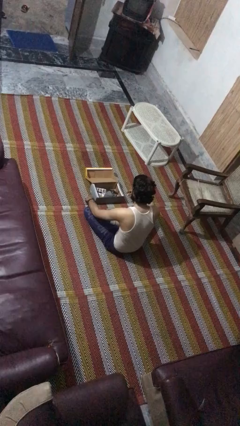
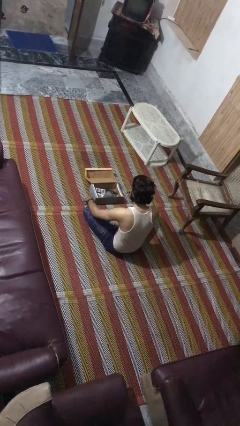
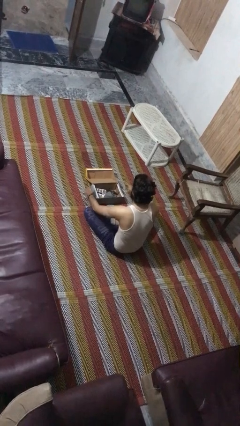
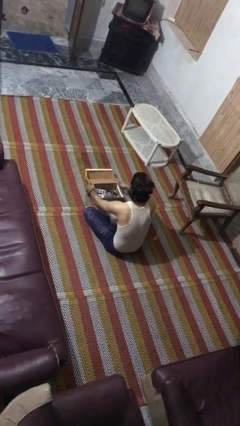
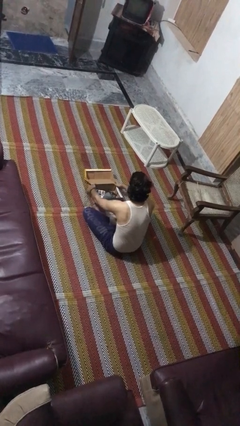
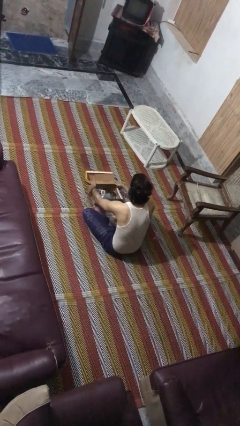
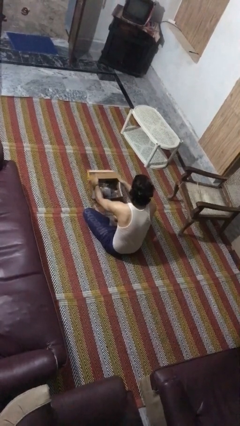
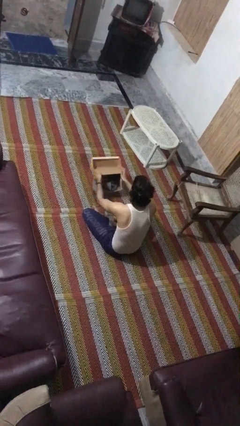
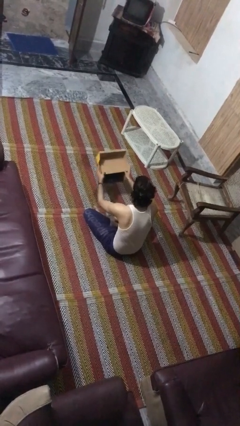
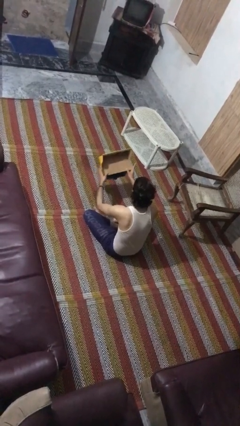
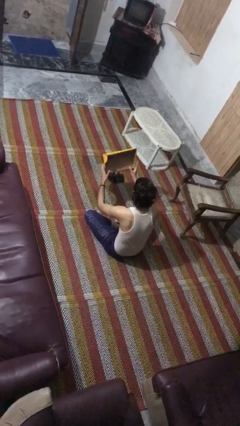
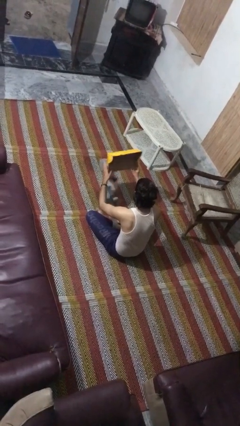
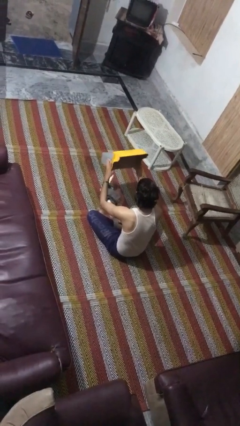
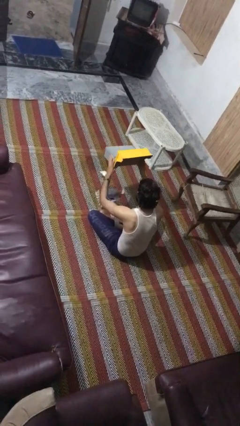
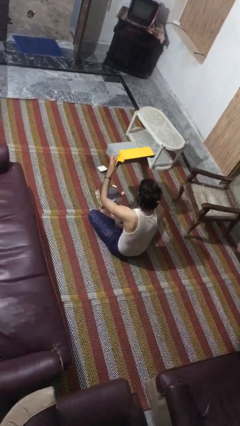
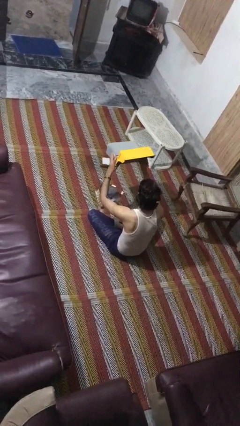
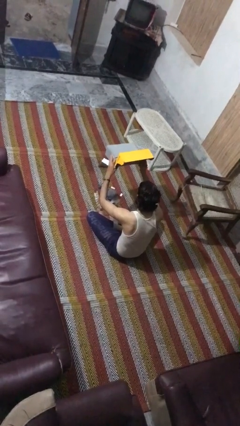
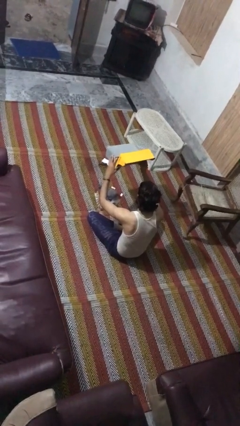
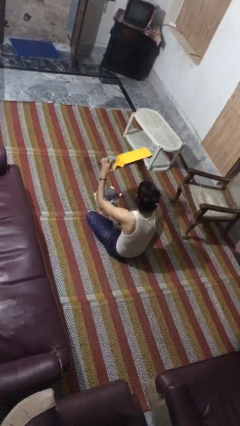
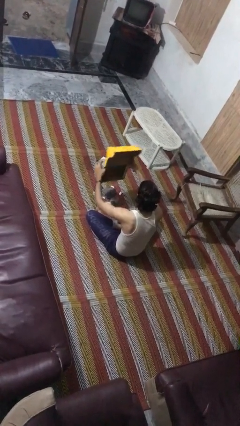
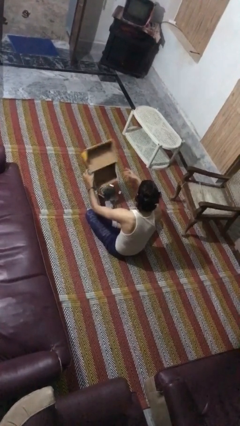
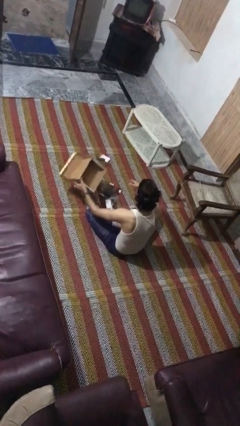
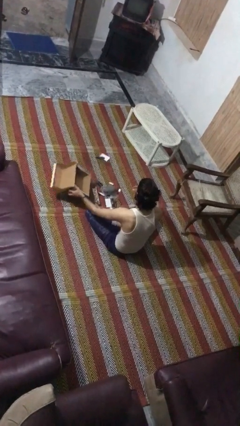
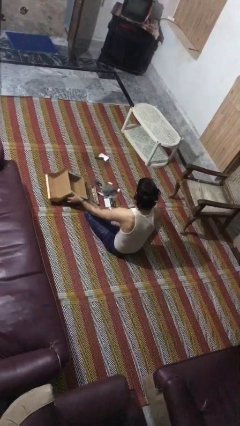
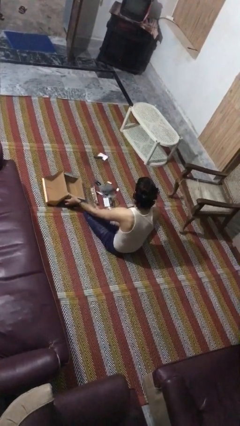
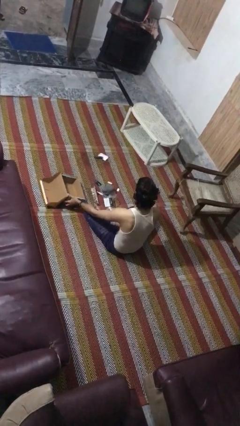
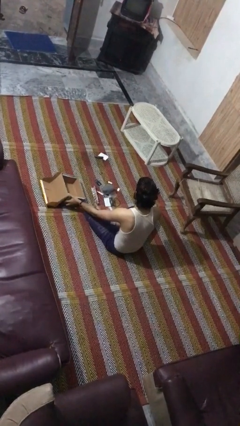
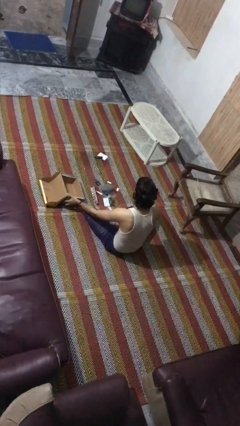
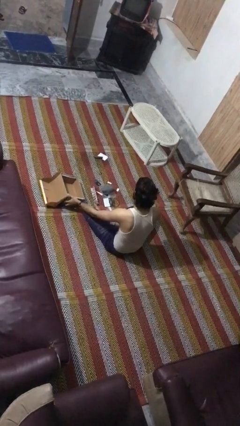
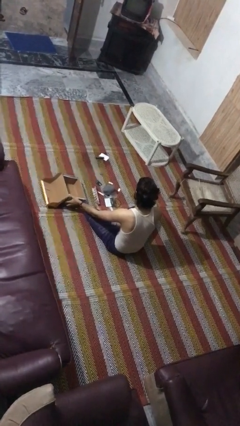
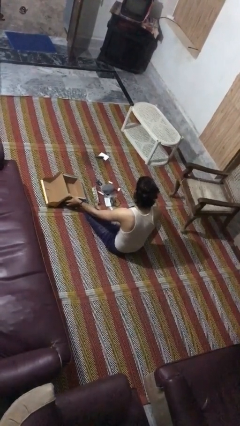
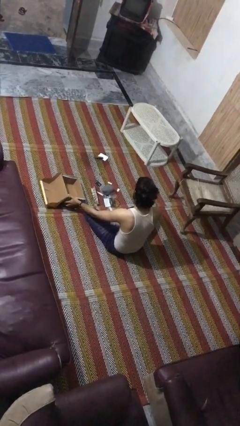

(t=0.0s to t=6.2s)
person unloads box onto floor

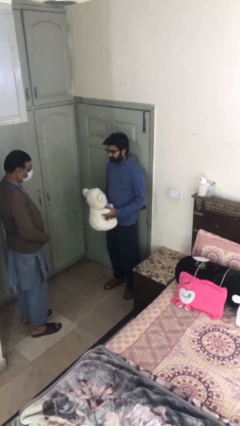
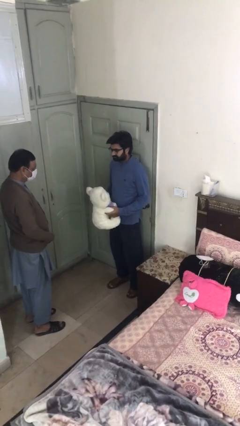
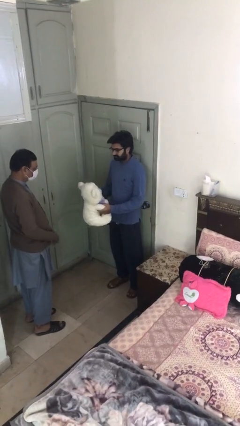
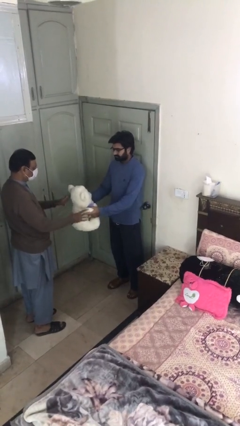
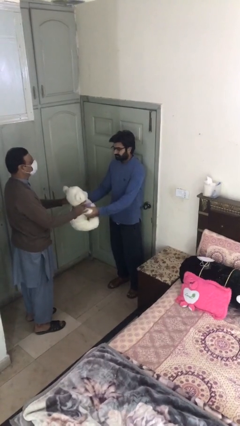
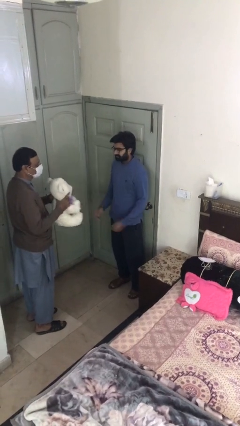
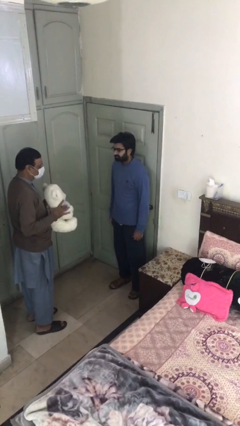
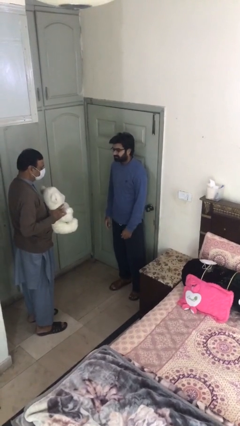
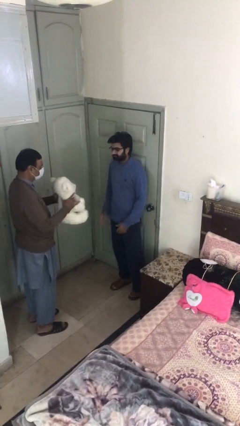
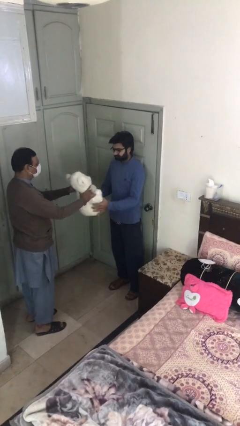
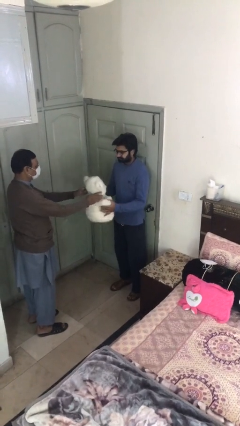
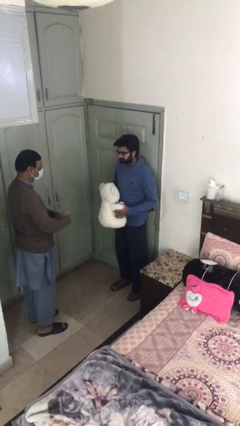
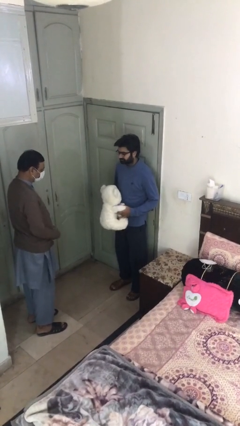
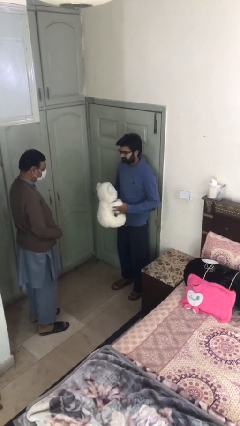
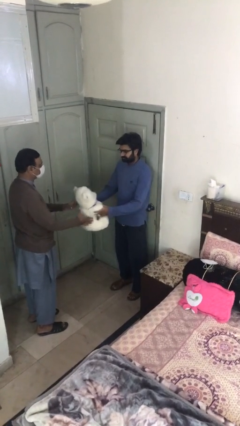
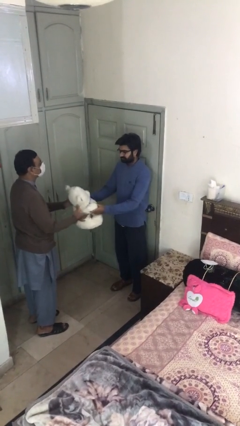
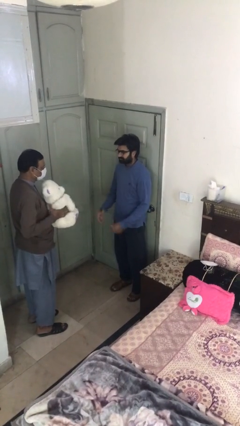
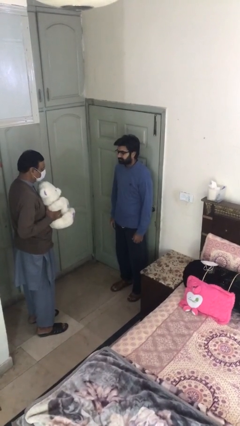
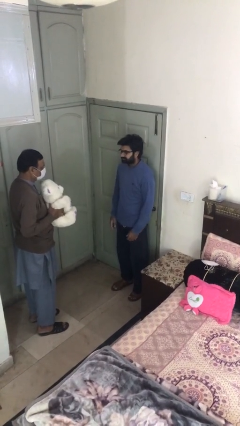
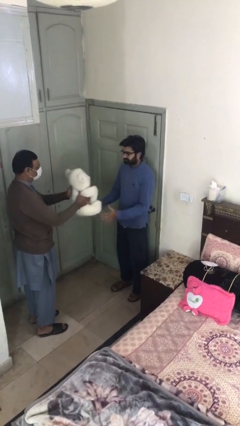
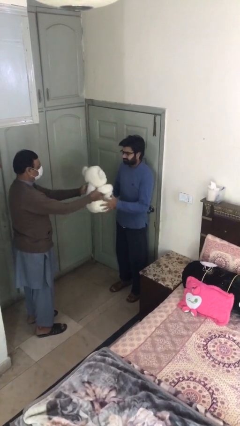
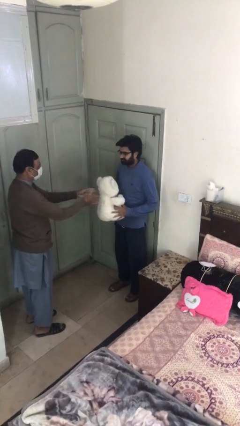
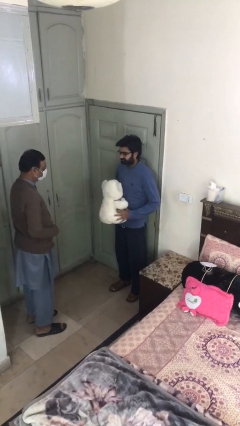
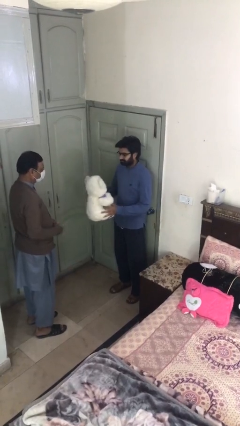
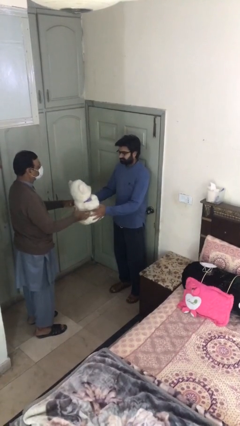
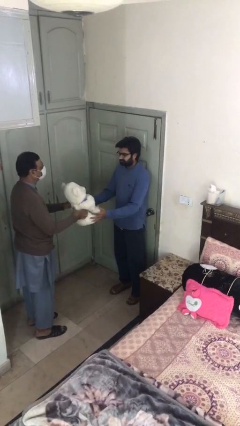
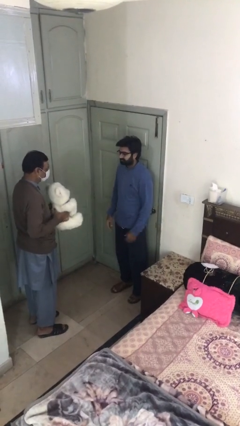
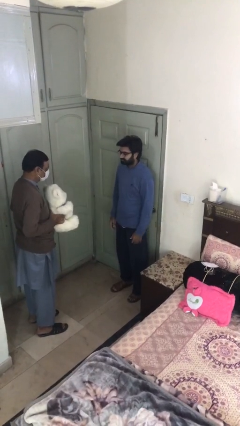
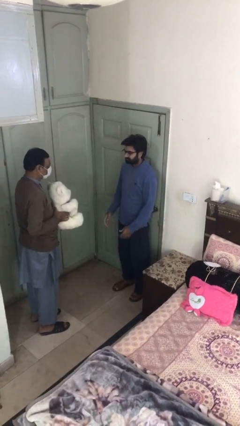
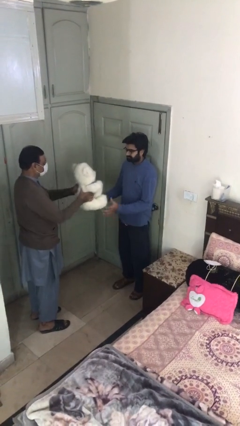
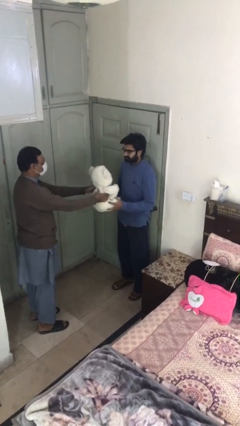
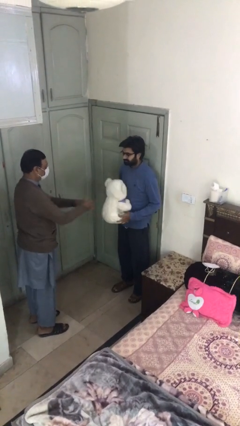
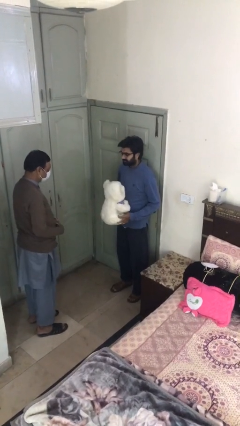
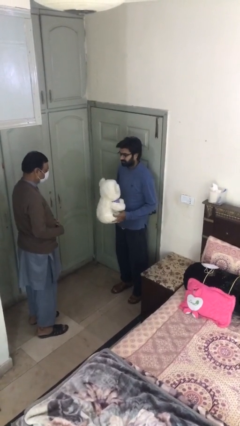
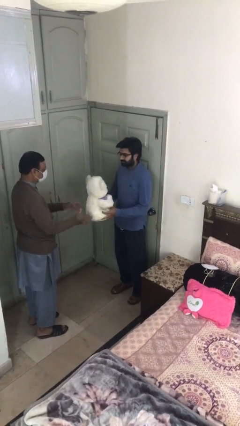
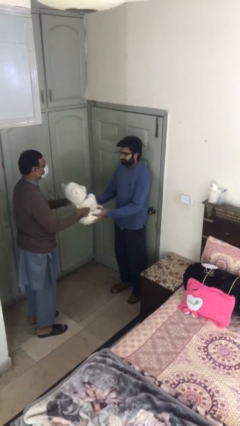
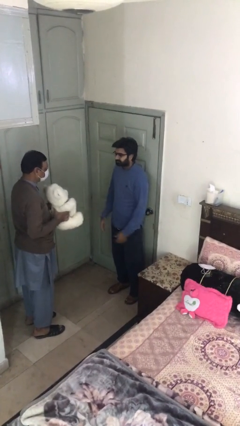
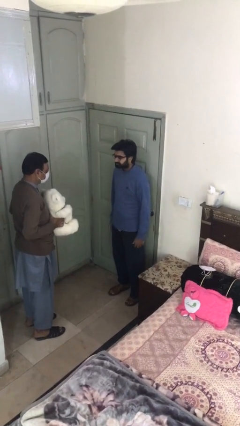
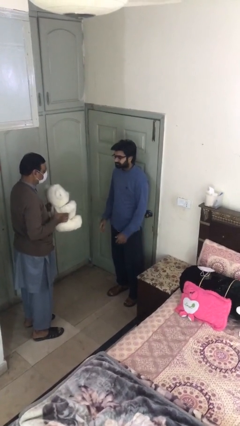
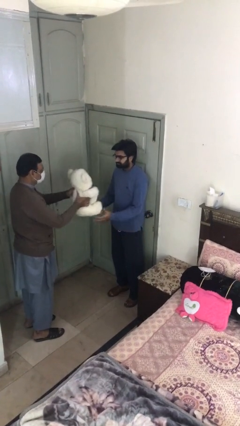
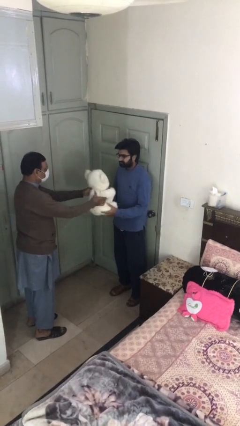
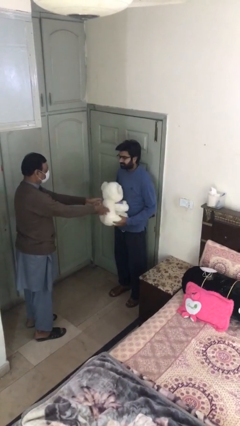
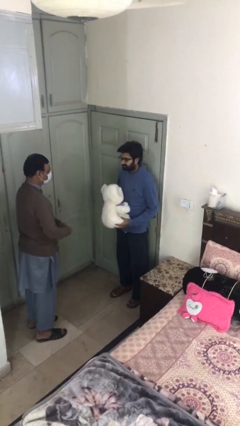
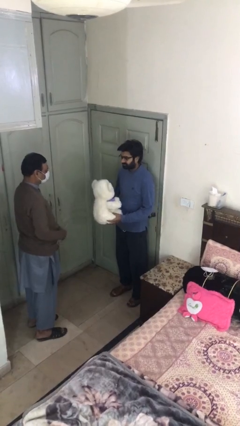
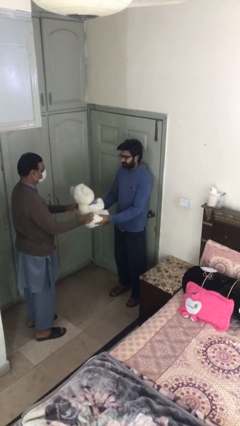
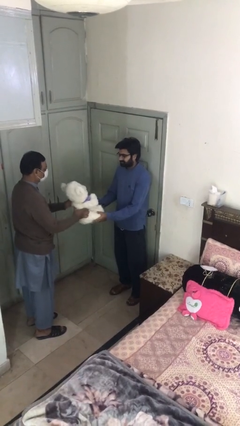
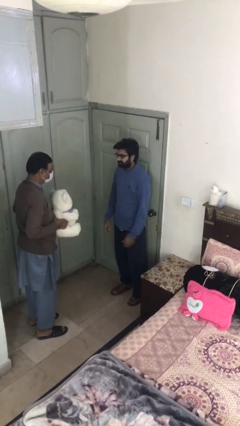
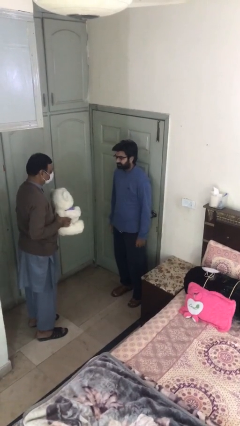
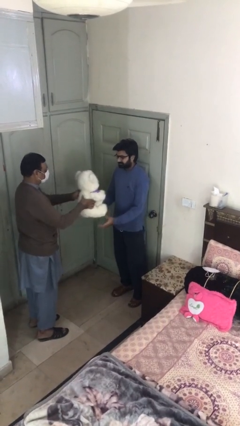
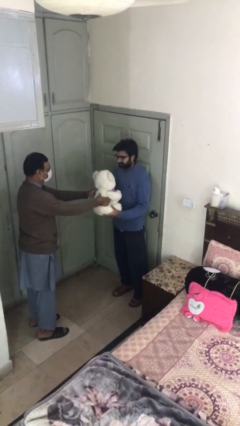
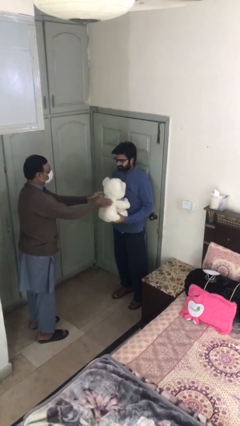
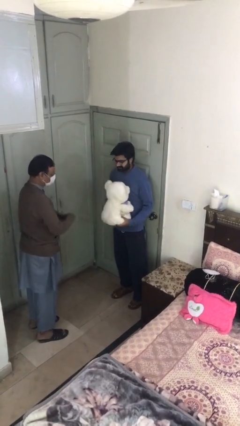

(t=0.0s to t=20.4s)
person transfers object to person

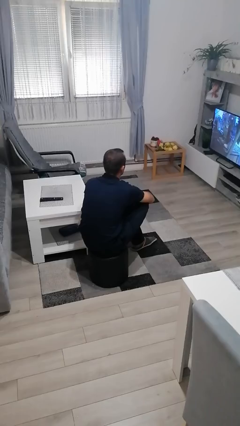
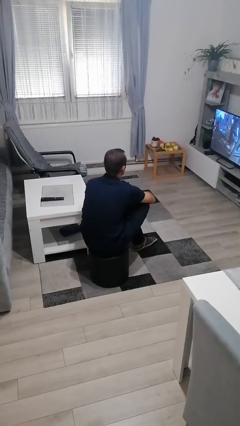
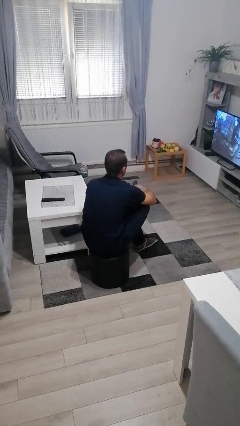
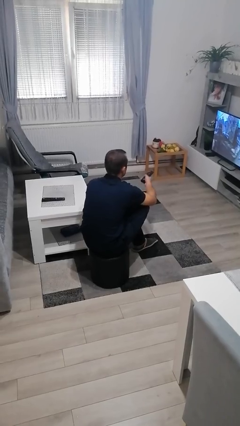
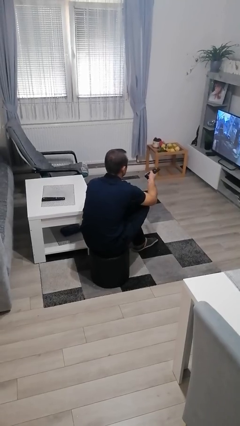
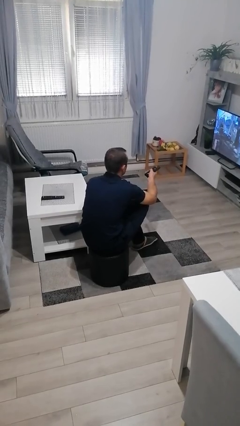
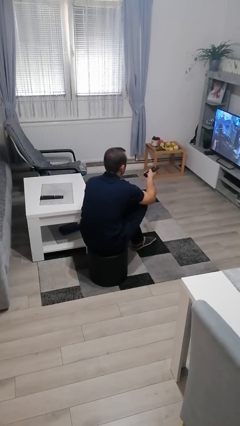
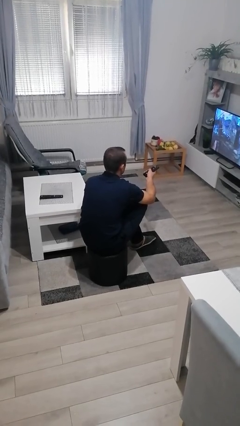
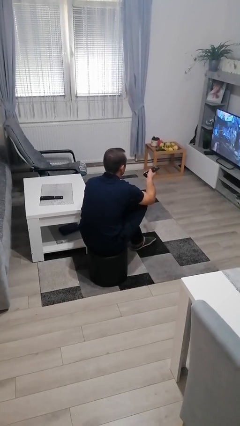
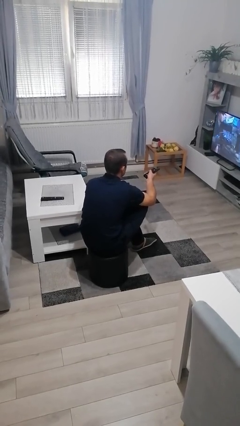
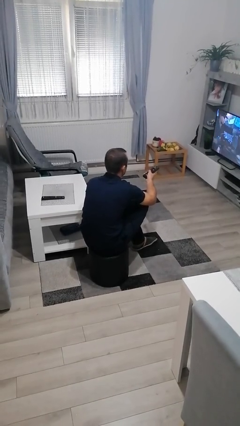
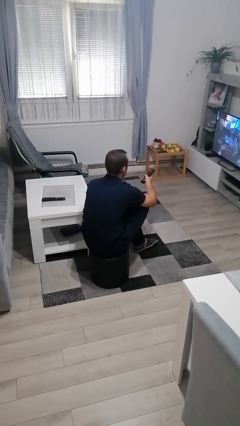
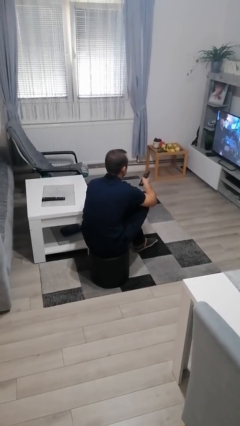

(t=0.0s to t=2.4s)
person uses television remote
